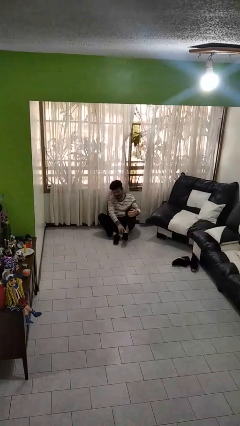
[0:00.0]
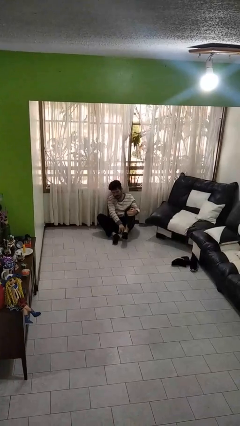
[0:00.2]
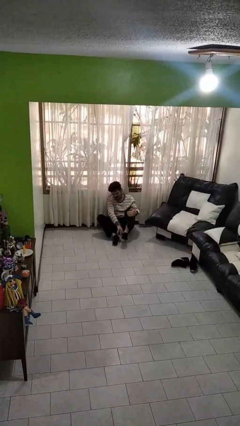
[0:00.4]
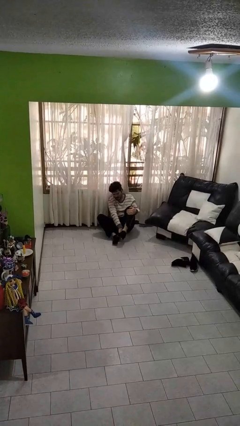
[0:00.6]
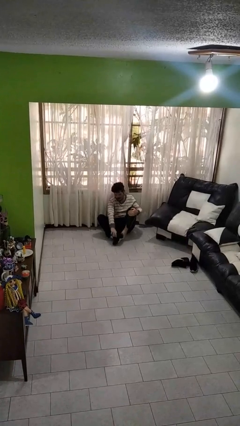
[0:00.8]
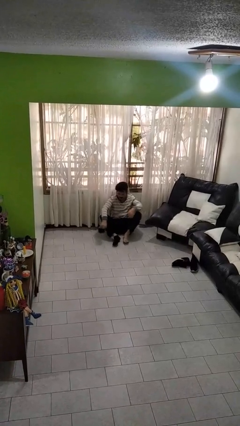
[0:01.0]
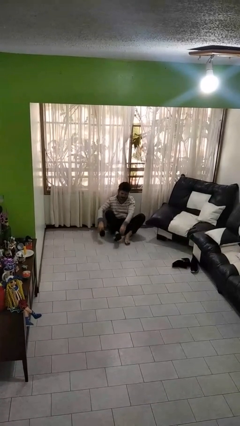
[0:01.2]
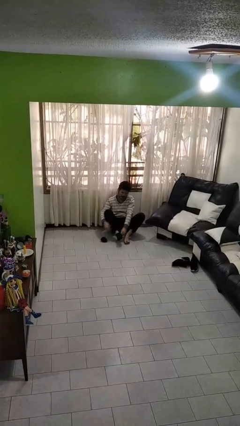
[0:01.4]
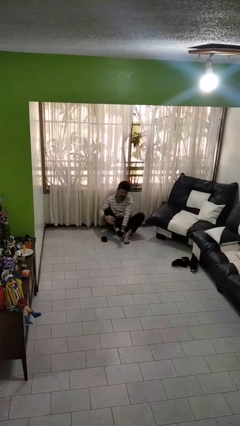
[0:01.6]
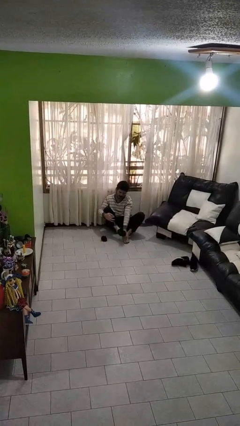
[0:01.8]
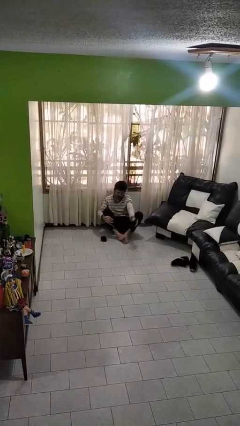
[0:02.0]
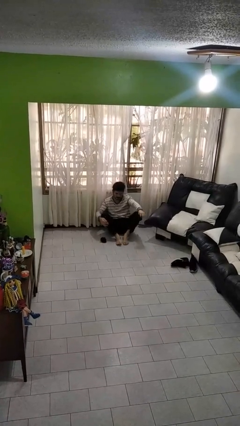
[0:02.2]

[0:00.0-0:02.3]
person takes off socks

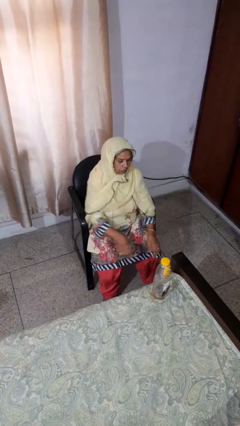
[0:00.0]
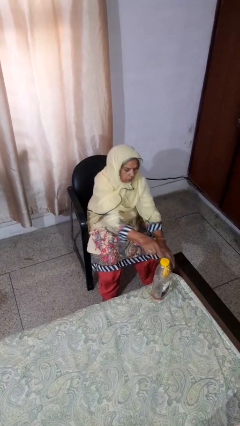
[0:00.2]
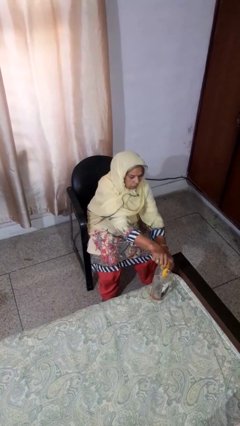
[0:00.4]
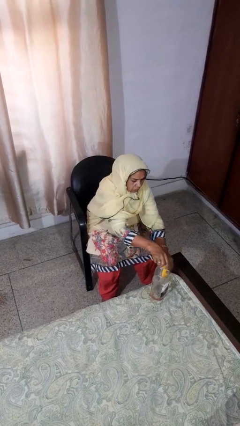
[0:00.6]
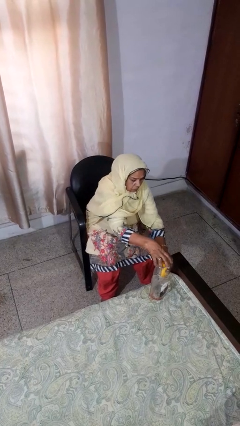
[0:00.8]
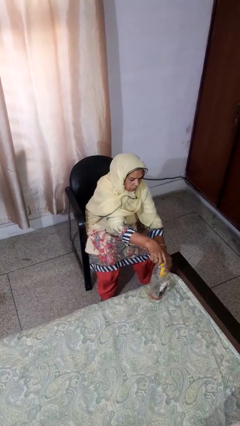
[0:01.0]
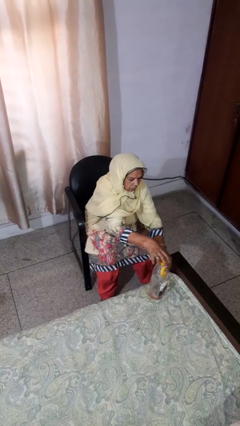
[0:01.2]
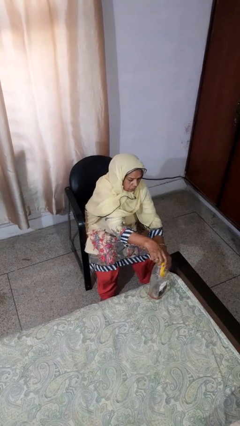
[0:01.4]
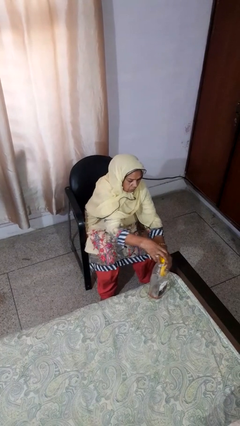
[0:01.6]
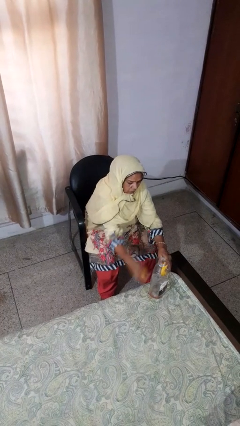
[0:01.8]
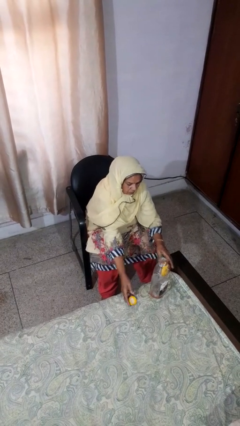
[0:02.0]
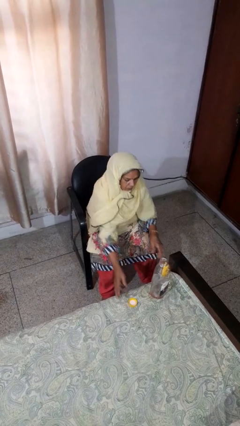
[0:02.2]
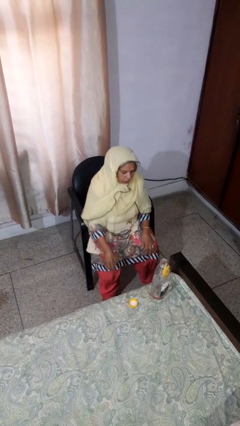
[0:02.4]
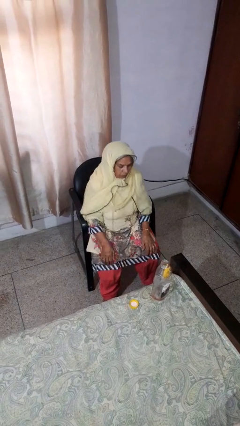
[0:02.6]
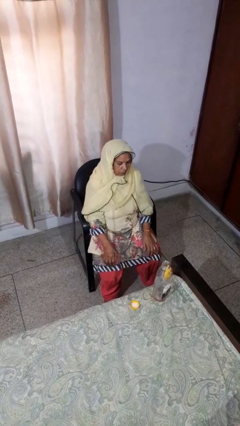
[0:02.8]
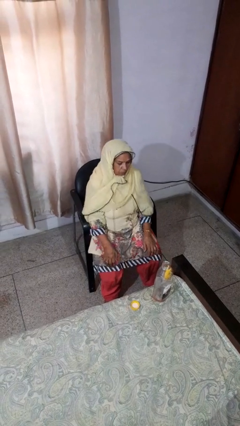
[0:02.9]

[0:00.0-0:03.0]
person unscrews lid from bottle

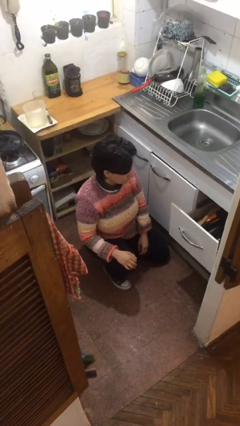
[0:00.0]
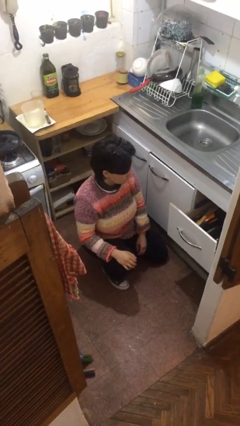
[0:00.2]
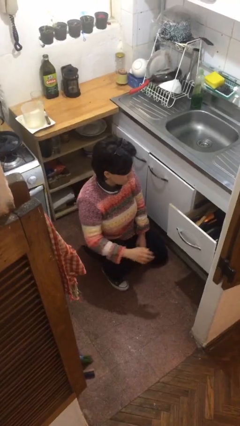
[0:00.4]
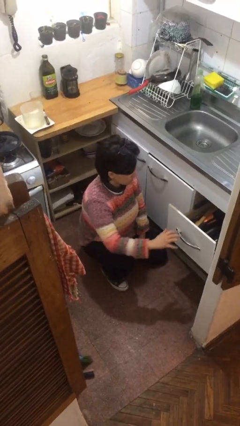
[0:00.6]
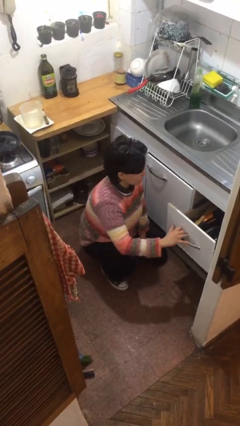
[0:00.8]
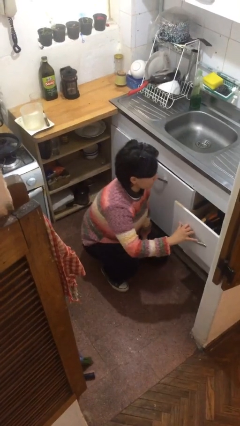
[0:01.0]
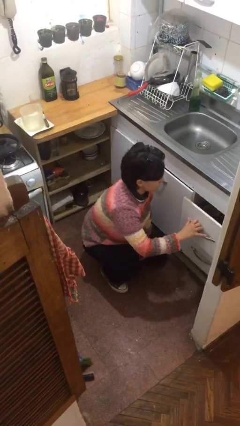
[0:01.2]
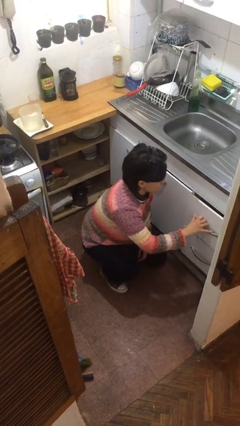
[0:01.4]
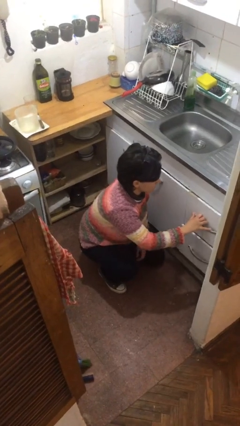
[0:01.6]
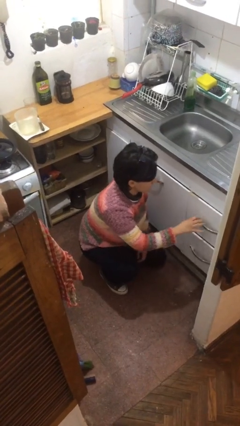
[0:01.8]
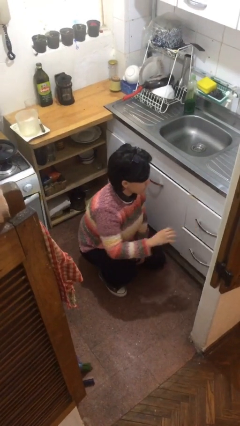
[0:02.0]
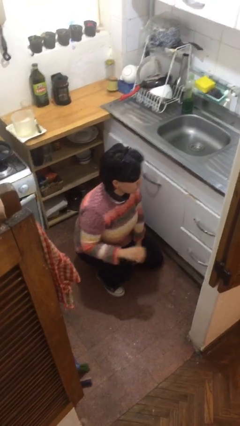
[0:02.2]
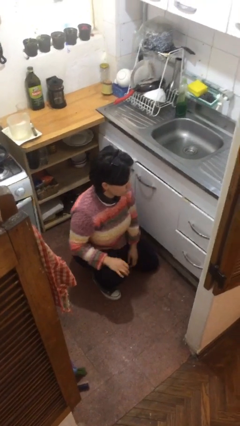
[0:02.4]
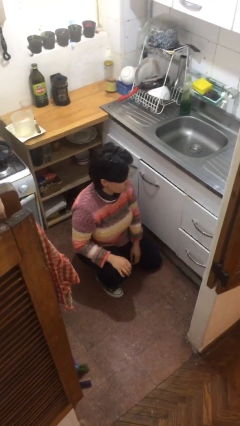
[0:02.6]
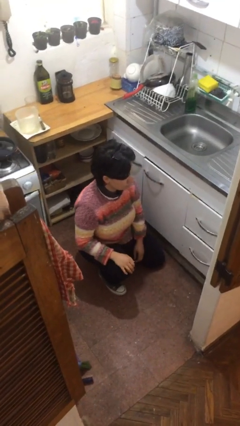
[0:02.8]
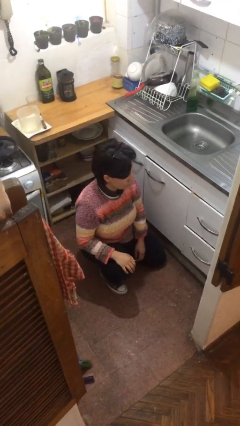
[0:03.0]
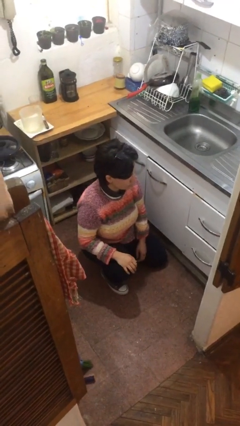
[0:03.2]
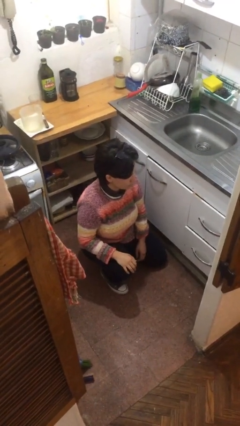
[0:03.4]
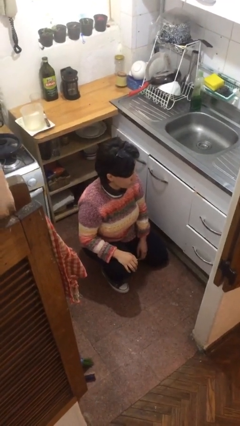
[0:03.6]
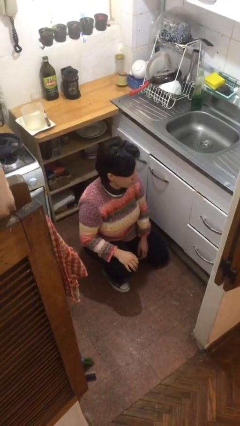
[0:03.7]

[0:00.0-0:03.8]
person closes kitchen drawer

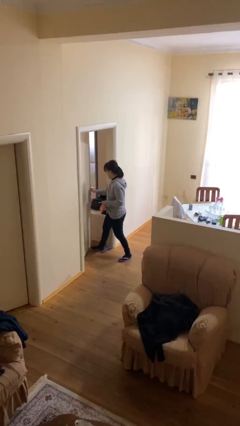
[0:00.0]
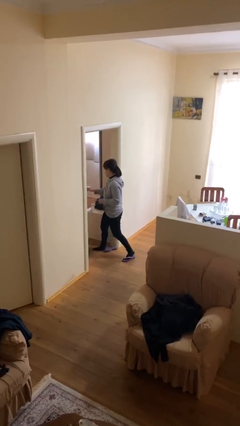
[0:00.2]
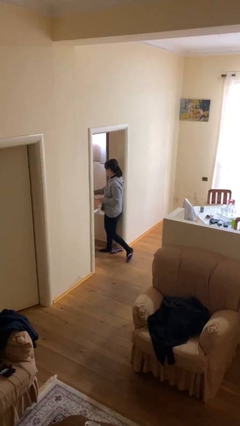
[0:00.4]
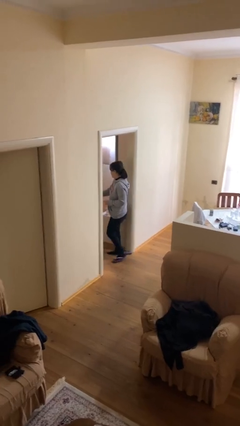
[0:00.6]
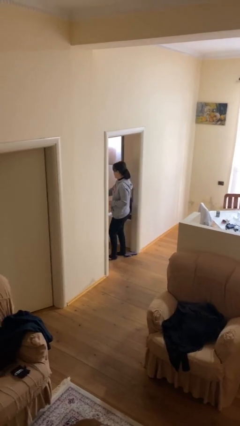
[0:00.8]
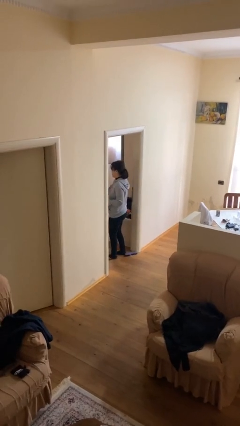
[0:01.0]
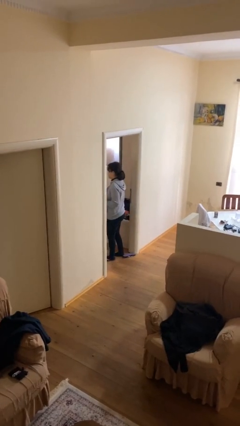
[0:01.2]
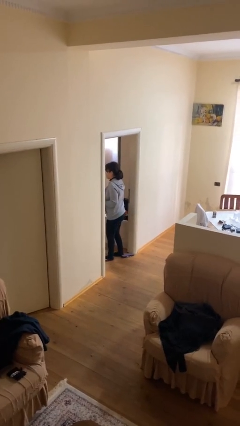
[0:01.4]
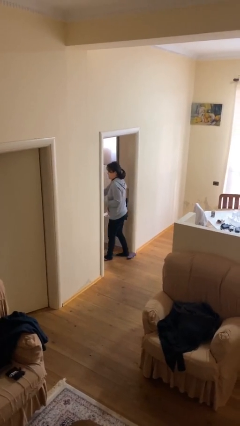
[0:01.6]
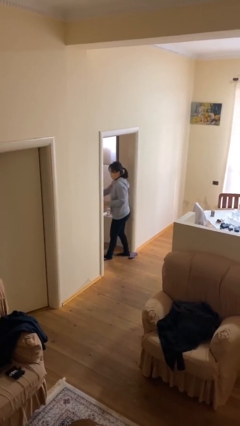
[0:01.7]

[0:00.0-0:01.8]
person opens facility door

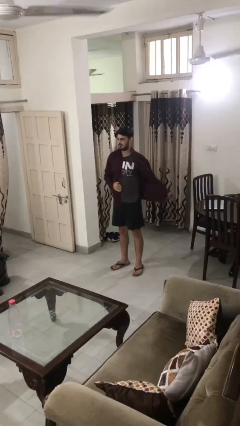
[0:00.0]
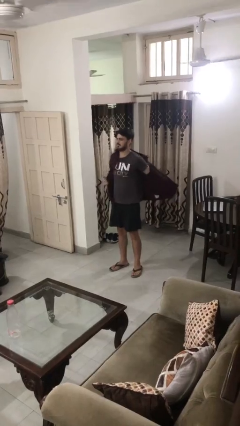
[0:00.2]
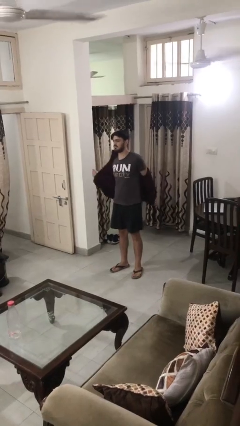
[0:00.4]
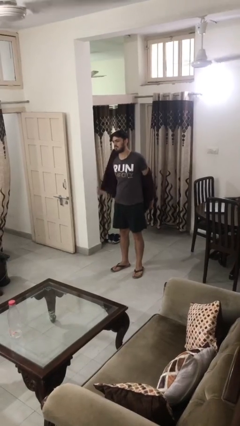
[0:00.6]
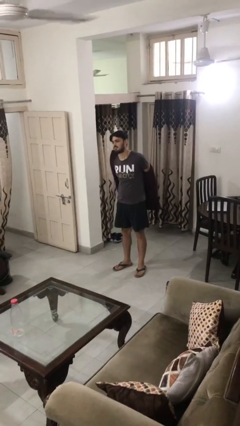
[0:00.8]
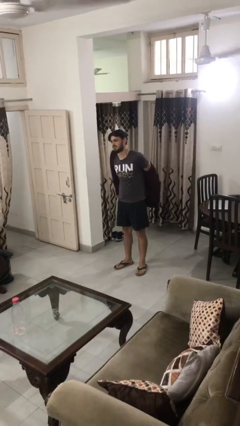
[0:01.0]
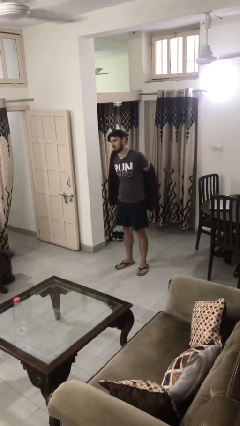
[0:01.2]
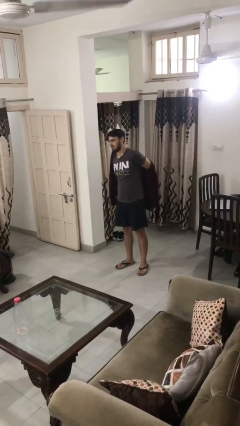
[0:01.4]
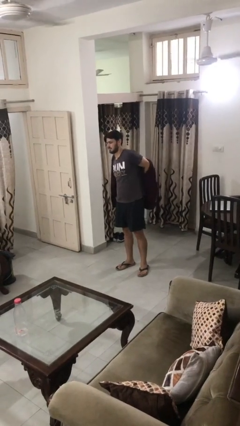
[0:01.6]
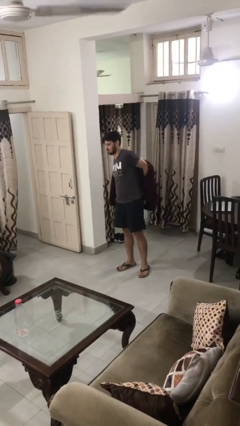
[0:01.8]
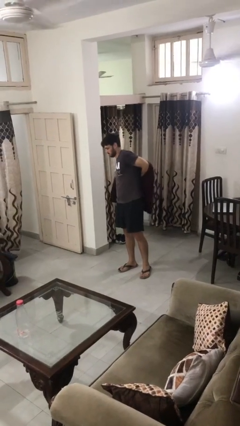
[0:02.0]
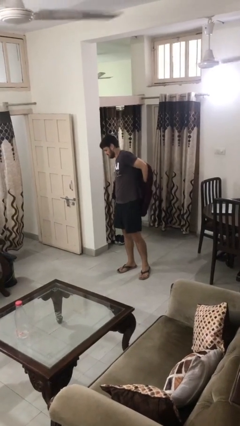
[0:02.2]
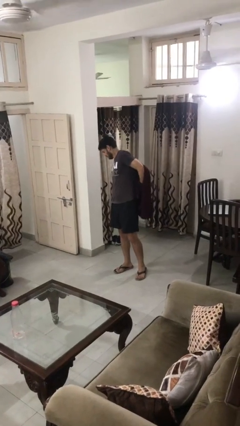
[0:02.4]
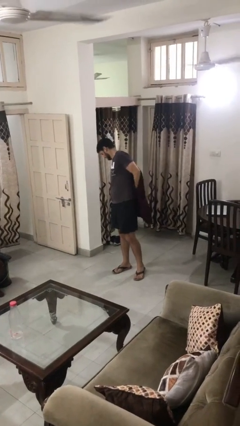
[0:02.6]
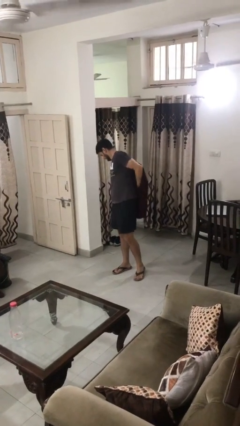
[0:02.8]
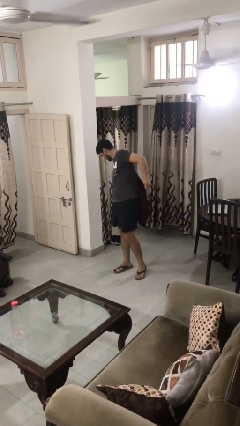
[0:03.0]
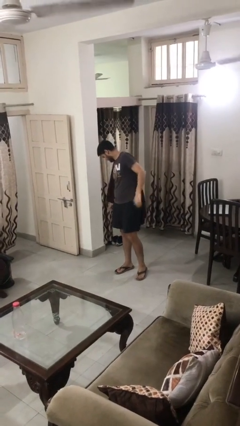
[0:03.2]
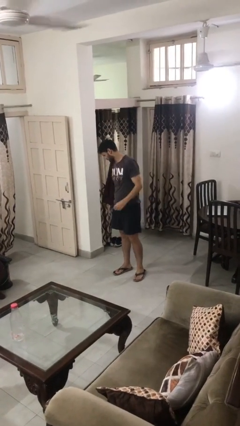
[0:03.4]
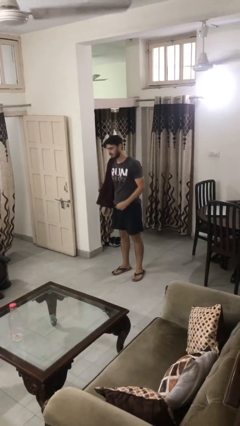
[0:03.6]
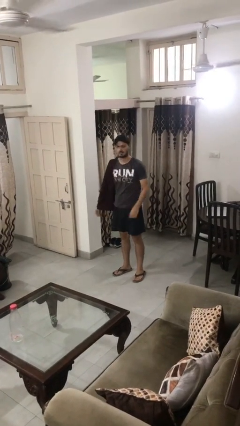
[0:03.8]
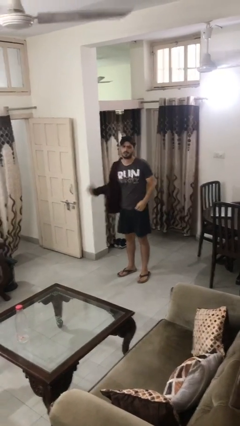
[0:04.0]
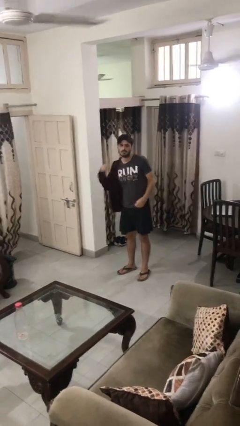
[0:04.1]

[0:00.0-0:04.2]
person takes off jacket

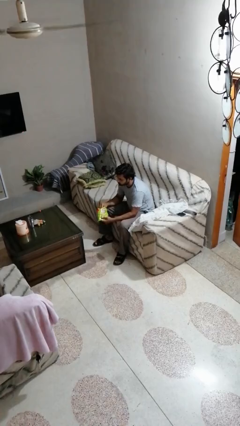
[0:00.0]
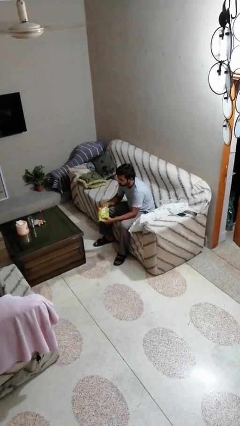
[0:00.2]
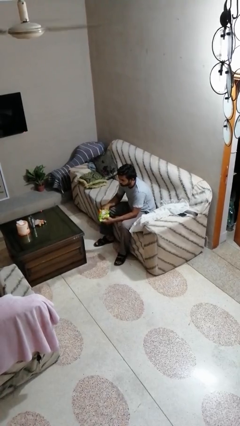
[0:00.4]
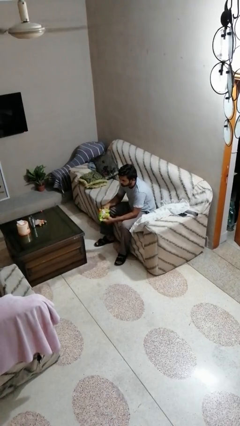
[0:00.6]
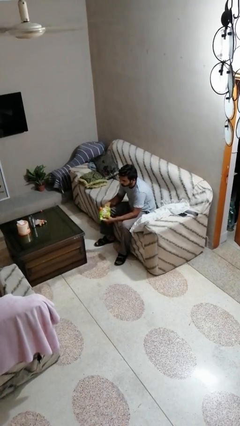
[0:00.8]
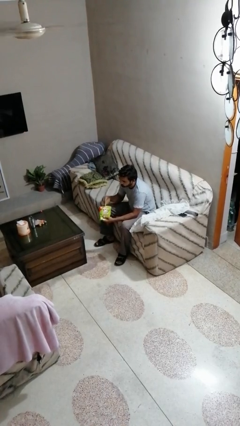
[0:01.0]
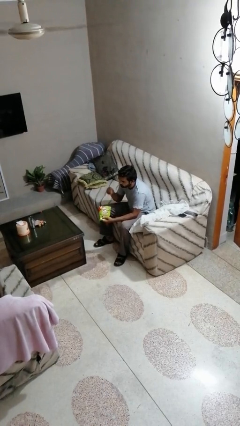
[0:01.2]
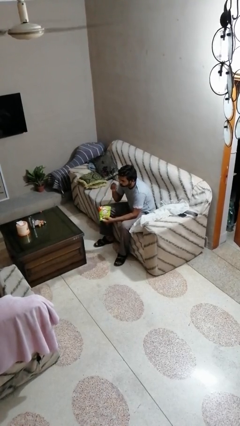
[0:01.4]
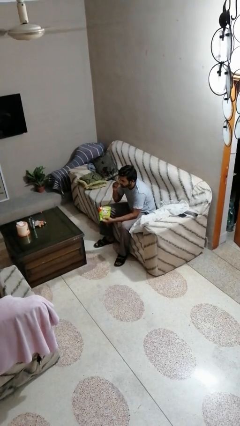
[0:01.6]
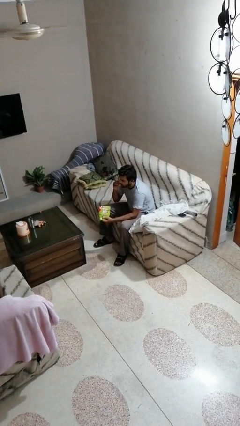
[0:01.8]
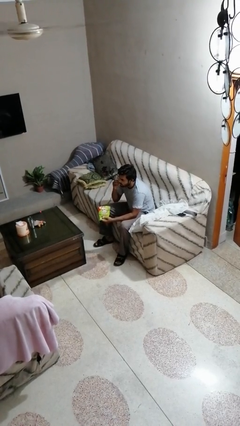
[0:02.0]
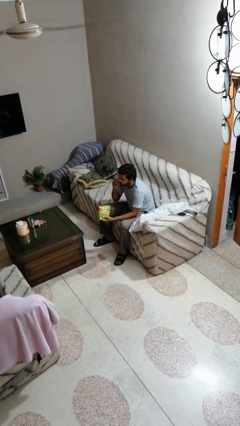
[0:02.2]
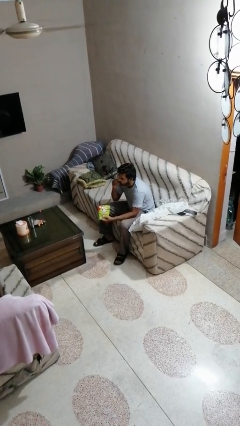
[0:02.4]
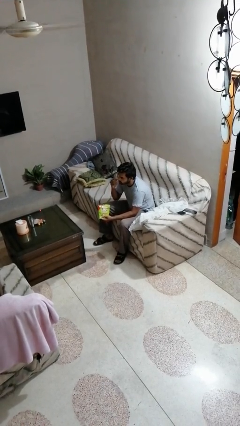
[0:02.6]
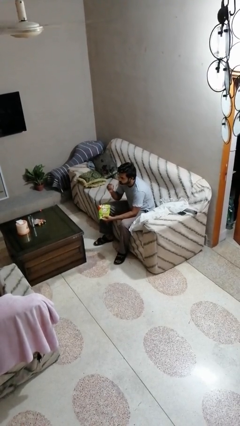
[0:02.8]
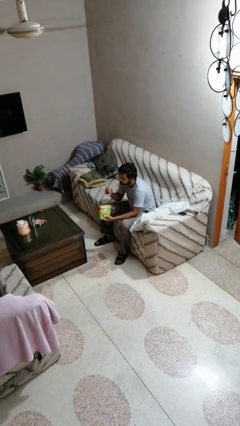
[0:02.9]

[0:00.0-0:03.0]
person eats snack from bag
